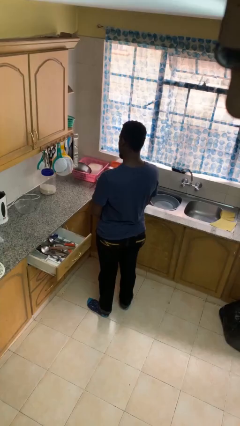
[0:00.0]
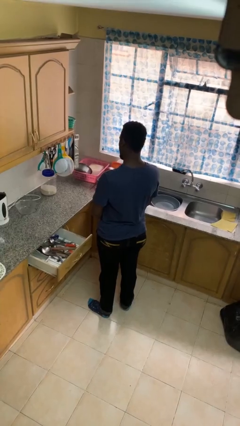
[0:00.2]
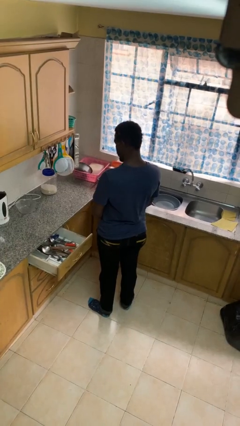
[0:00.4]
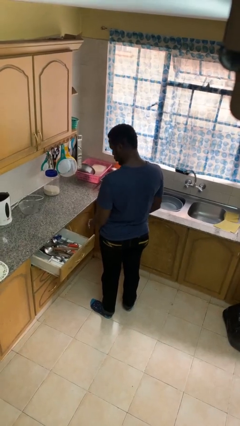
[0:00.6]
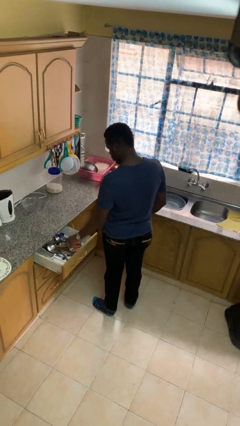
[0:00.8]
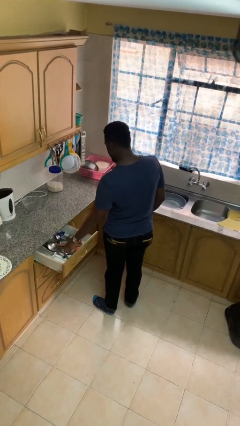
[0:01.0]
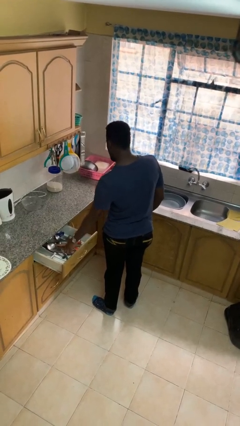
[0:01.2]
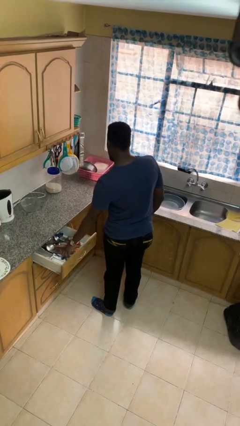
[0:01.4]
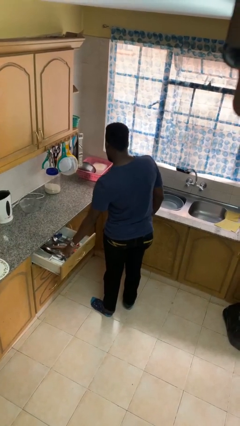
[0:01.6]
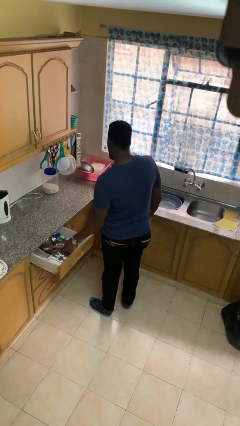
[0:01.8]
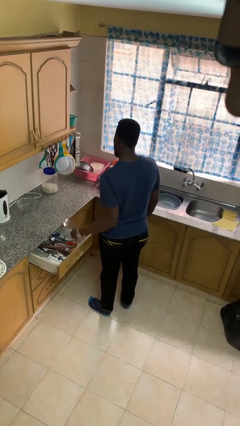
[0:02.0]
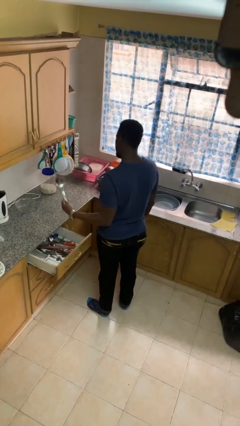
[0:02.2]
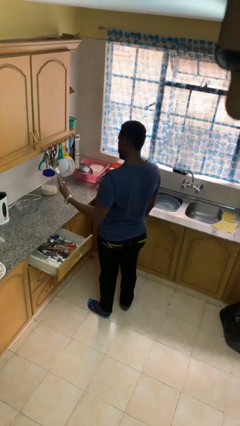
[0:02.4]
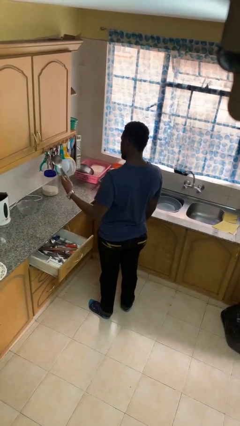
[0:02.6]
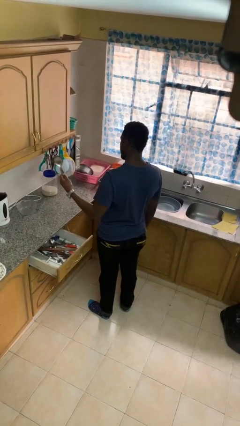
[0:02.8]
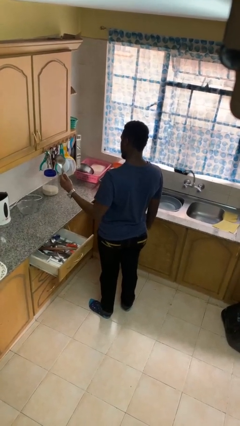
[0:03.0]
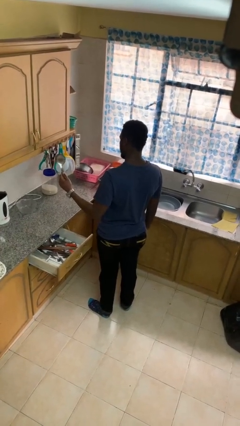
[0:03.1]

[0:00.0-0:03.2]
person takes object from kitchen drawer

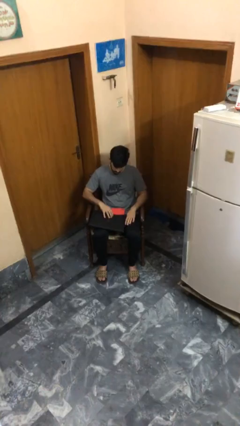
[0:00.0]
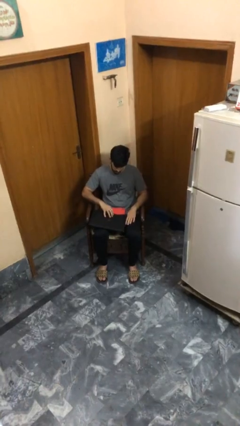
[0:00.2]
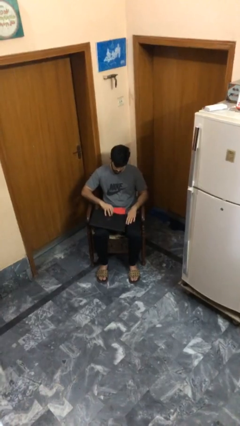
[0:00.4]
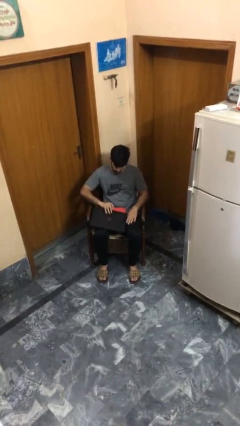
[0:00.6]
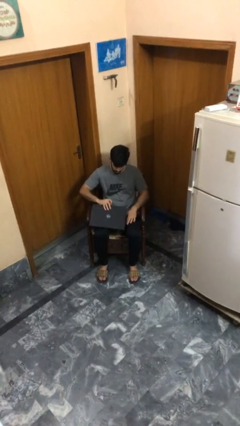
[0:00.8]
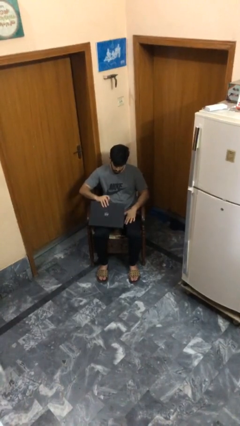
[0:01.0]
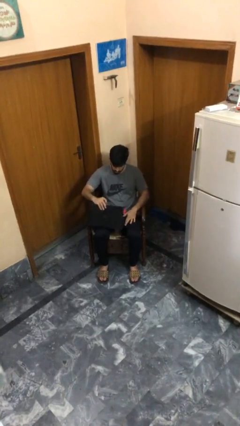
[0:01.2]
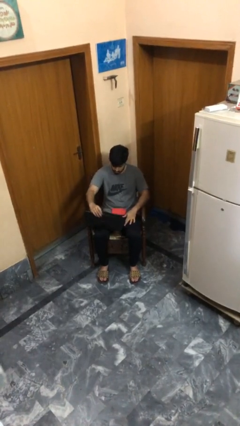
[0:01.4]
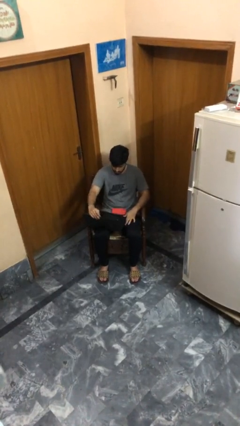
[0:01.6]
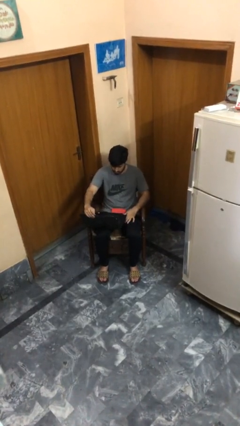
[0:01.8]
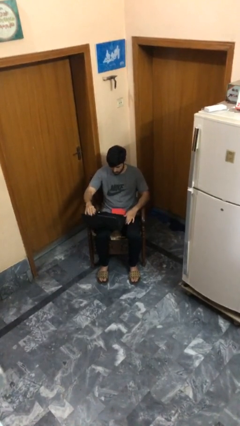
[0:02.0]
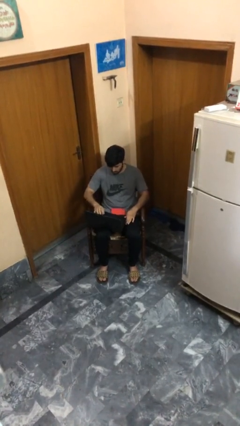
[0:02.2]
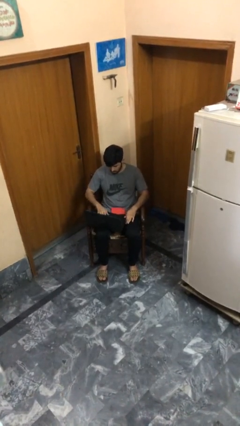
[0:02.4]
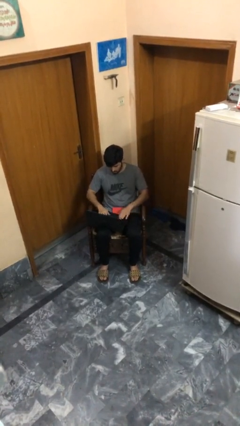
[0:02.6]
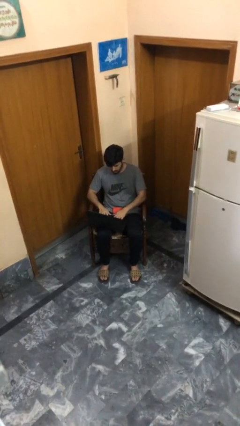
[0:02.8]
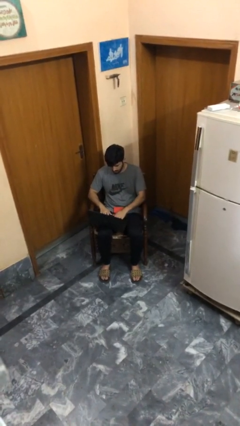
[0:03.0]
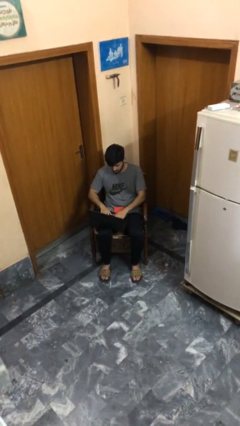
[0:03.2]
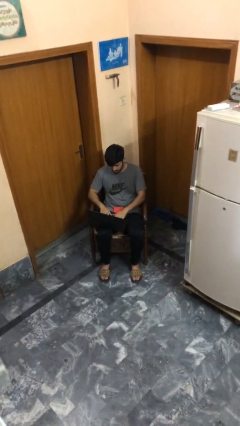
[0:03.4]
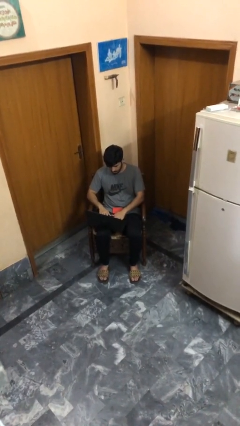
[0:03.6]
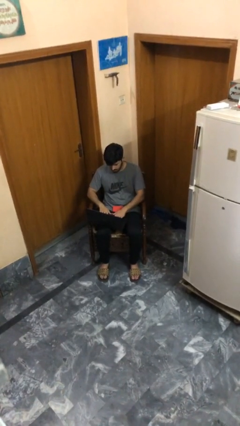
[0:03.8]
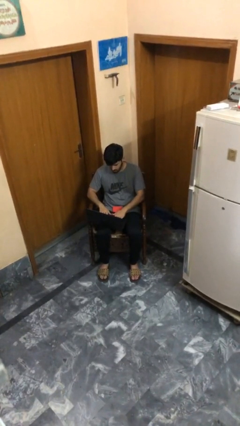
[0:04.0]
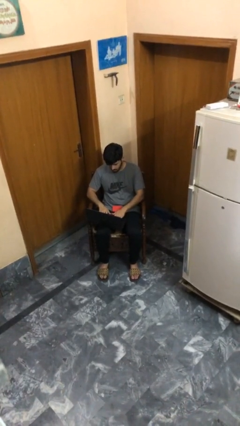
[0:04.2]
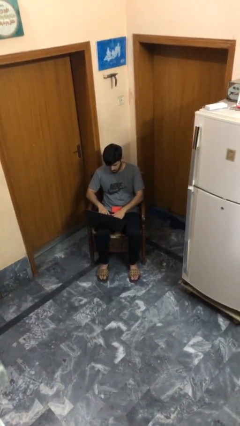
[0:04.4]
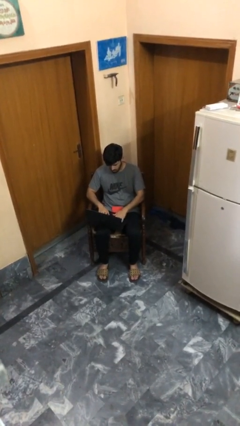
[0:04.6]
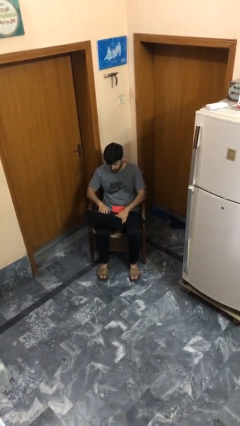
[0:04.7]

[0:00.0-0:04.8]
person opens laptop

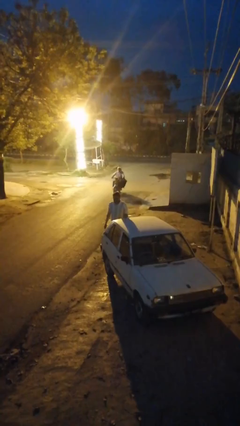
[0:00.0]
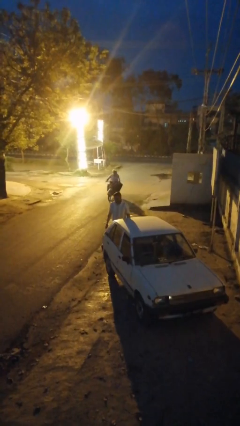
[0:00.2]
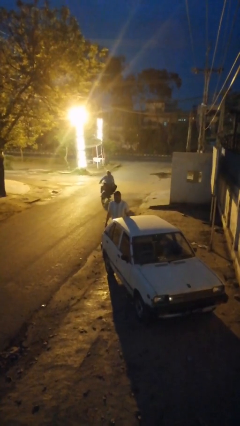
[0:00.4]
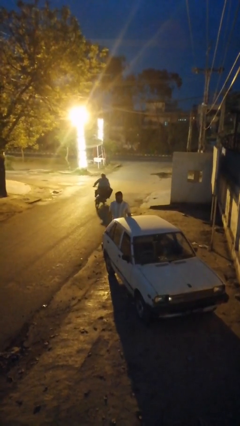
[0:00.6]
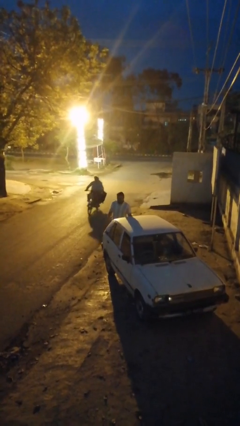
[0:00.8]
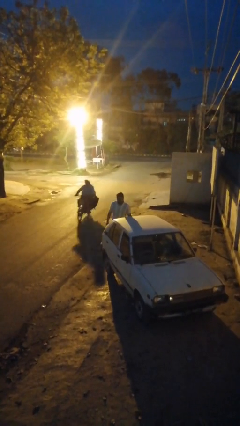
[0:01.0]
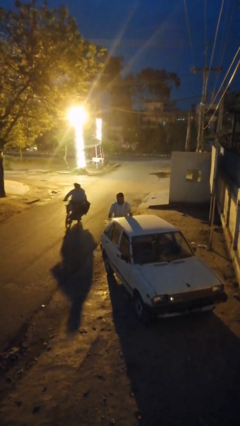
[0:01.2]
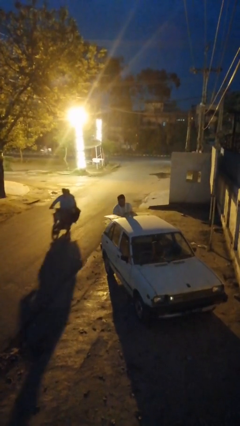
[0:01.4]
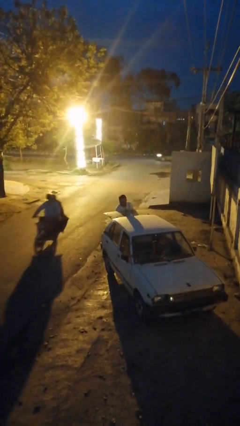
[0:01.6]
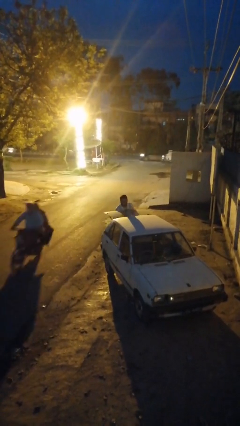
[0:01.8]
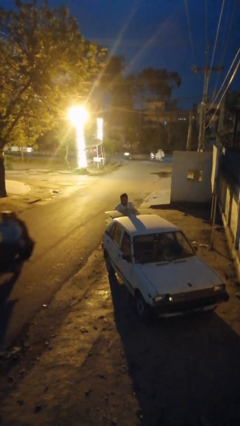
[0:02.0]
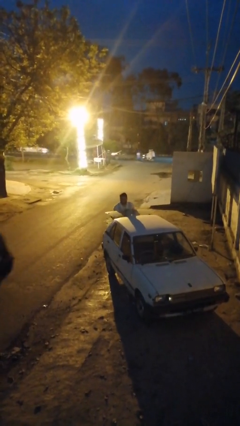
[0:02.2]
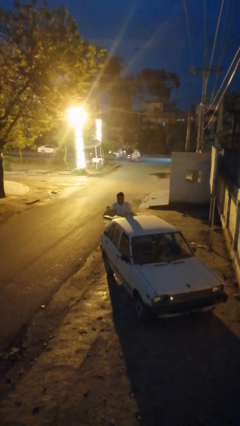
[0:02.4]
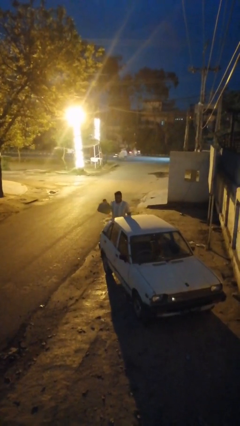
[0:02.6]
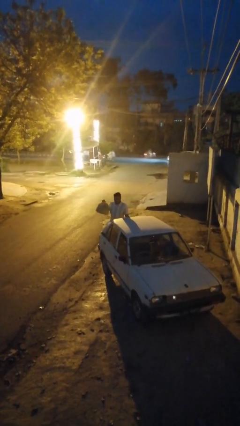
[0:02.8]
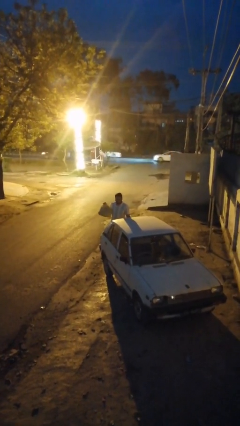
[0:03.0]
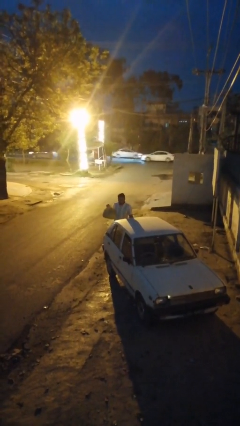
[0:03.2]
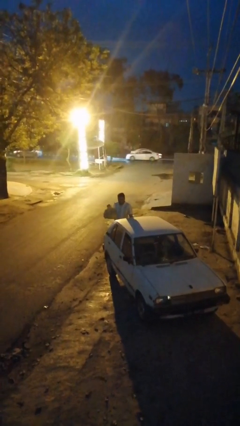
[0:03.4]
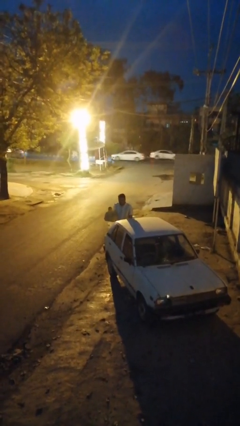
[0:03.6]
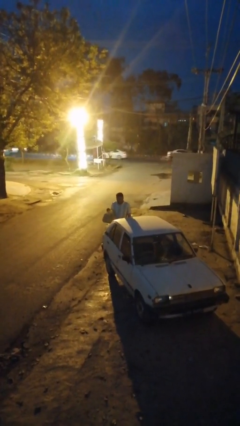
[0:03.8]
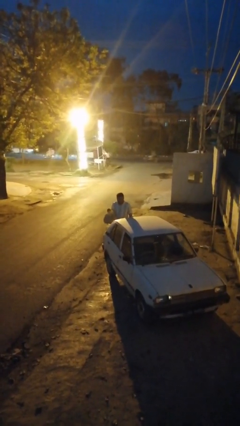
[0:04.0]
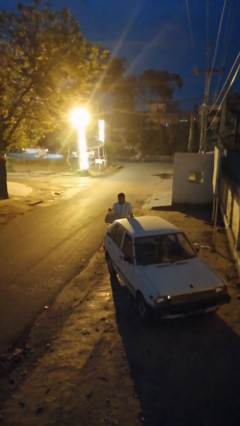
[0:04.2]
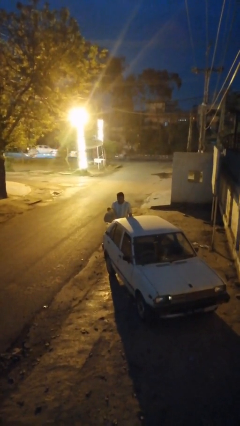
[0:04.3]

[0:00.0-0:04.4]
person unloads car

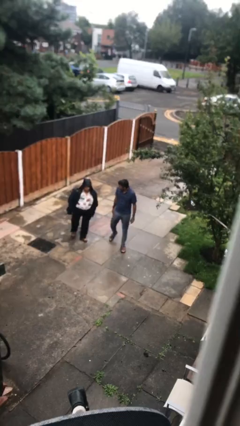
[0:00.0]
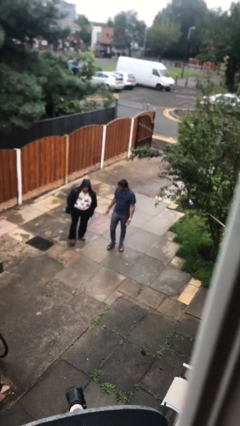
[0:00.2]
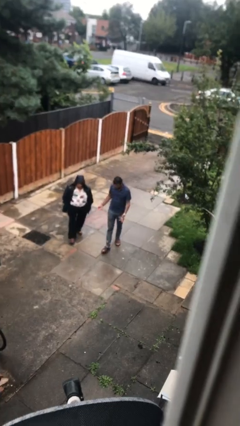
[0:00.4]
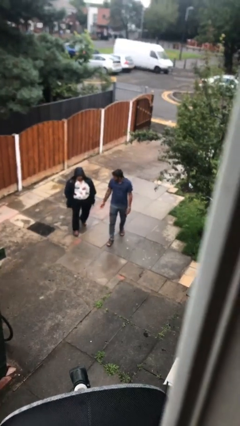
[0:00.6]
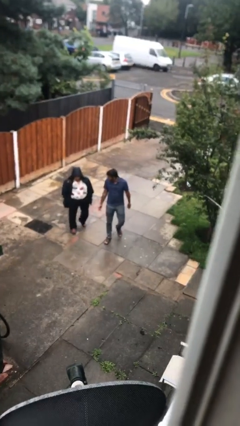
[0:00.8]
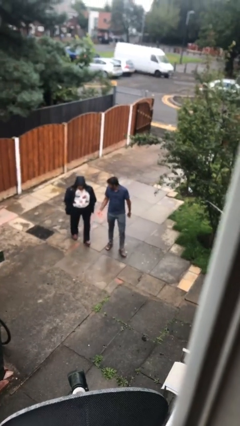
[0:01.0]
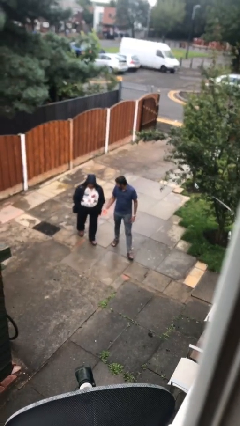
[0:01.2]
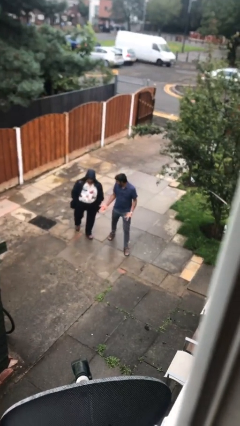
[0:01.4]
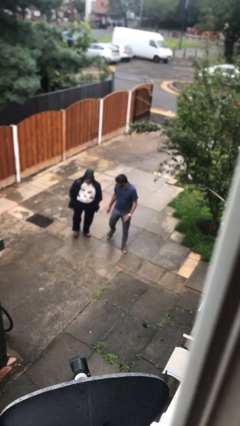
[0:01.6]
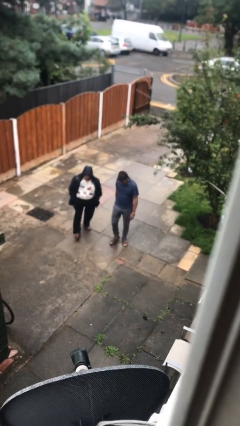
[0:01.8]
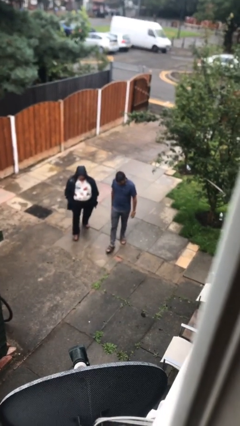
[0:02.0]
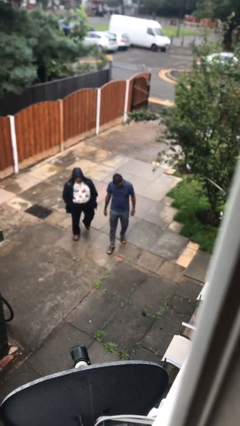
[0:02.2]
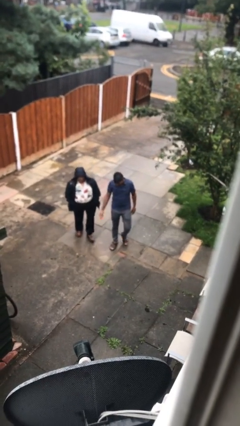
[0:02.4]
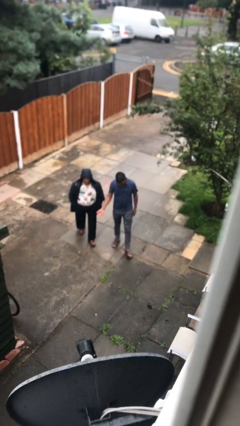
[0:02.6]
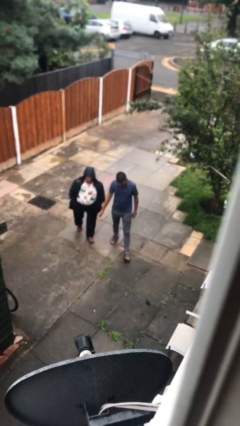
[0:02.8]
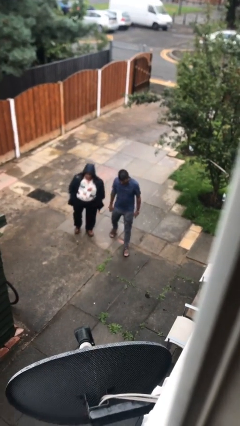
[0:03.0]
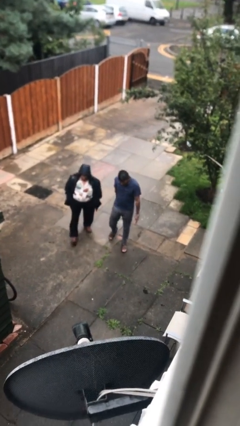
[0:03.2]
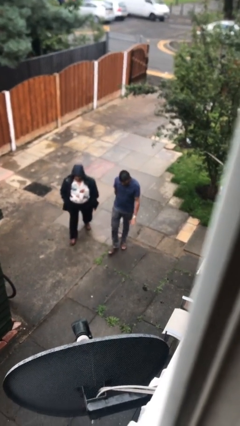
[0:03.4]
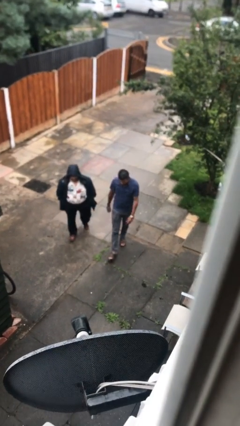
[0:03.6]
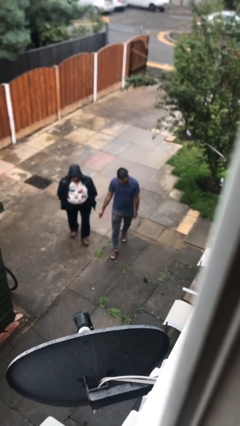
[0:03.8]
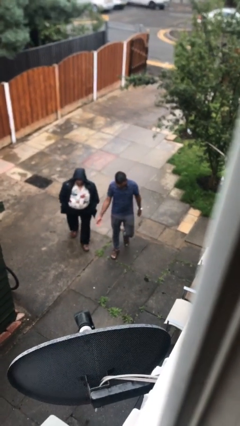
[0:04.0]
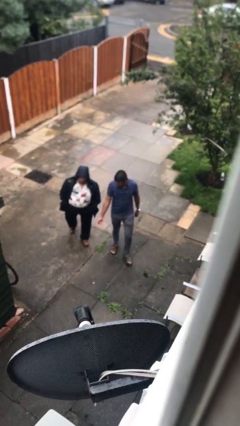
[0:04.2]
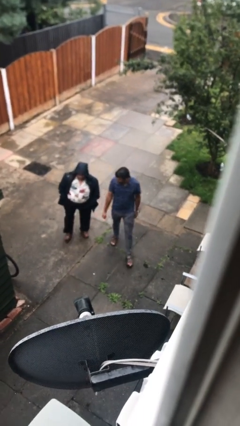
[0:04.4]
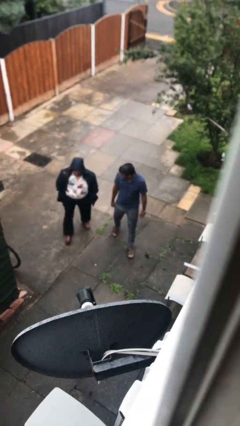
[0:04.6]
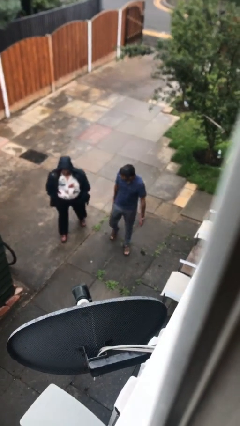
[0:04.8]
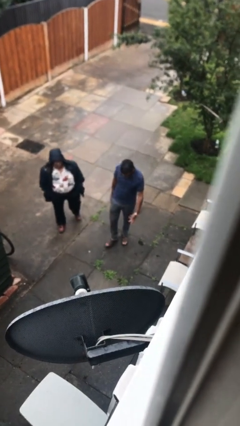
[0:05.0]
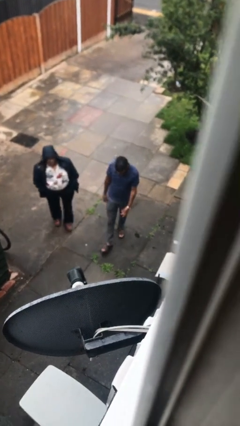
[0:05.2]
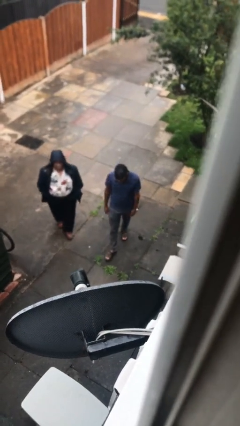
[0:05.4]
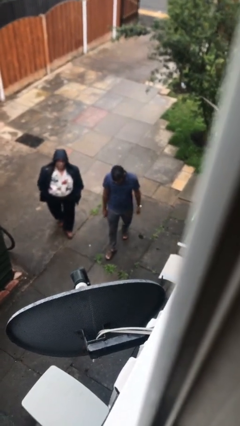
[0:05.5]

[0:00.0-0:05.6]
person talks to person
